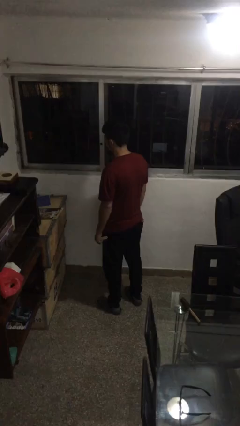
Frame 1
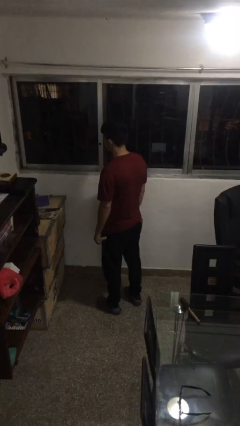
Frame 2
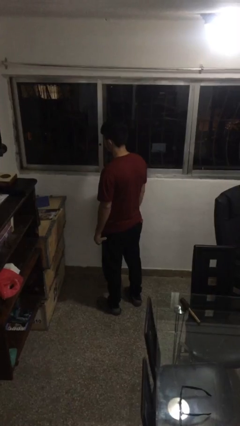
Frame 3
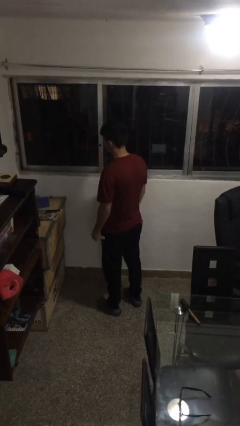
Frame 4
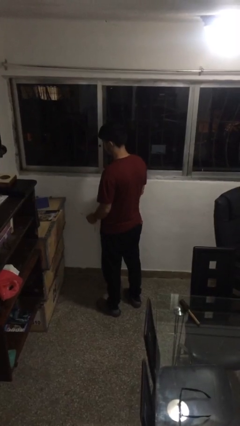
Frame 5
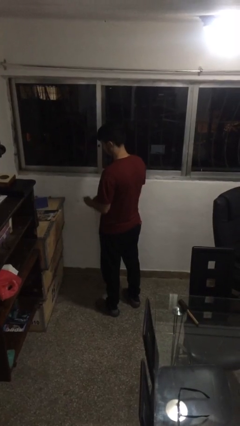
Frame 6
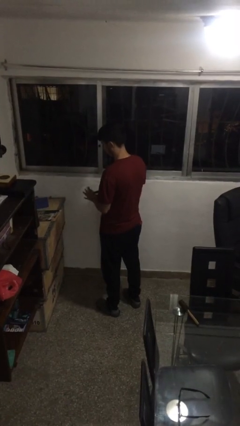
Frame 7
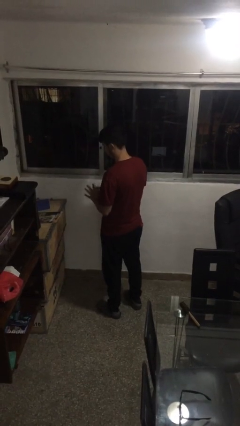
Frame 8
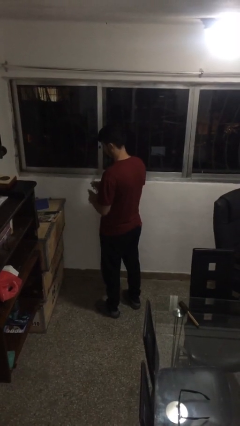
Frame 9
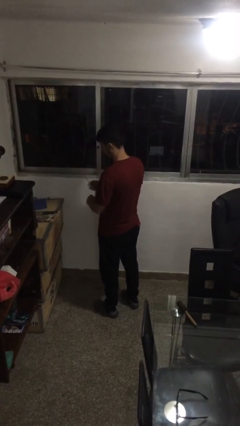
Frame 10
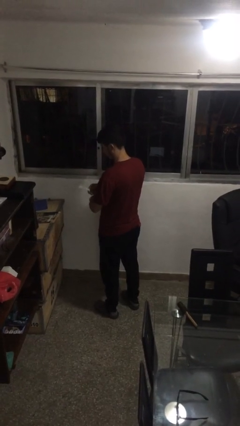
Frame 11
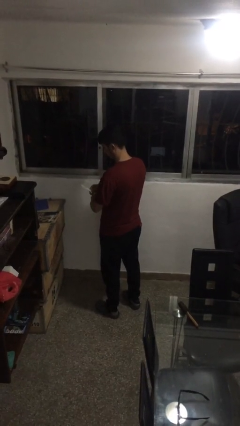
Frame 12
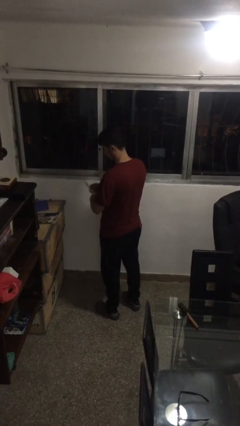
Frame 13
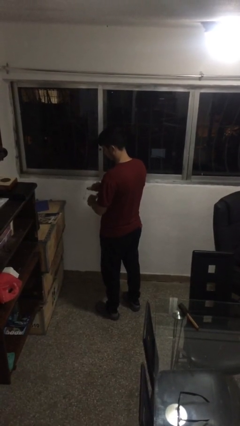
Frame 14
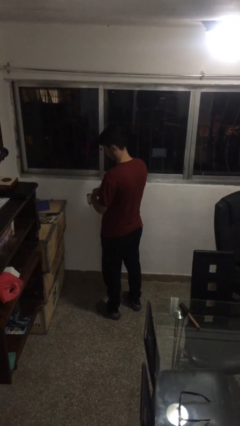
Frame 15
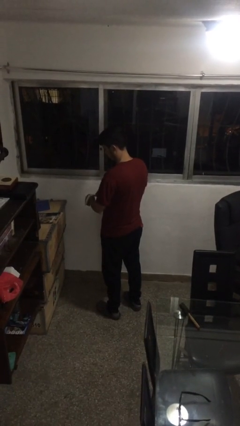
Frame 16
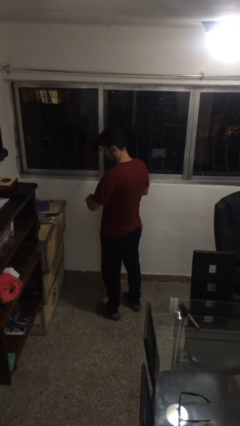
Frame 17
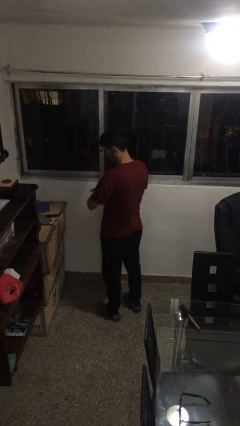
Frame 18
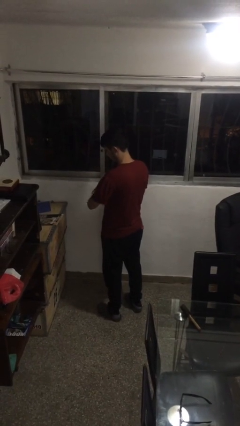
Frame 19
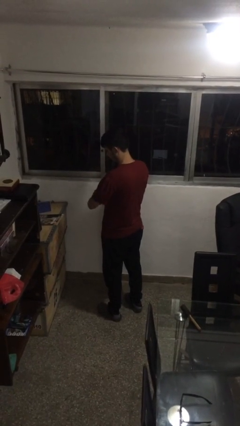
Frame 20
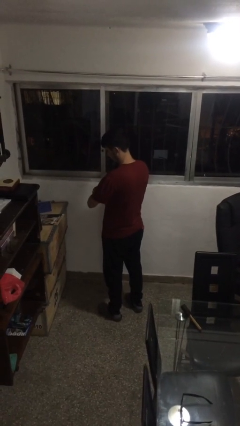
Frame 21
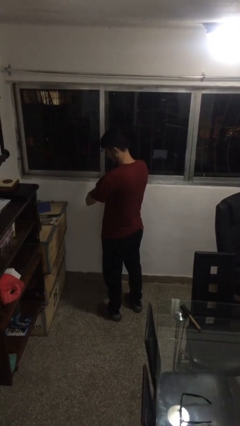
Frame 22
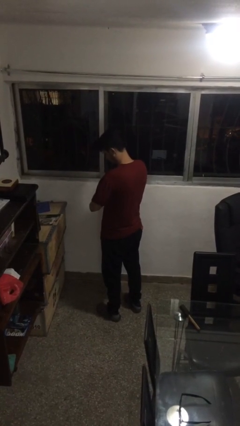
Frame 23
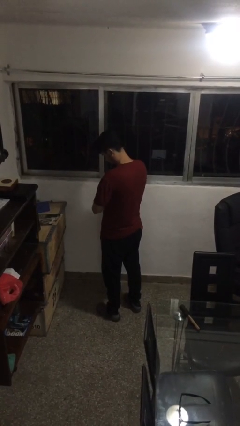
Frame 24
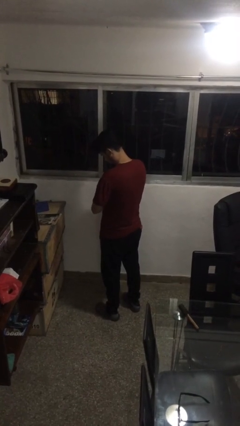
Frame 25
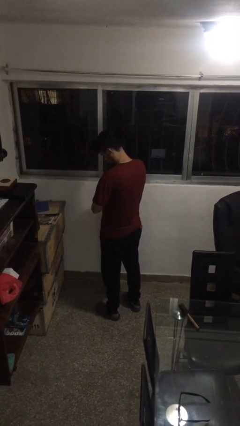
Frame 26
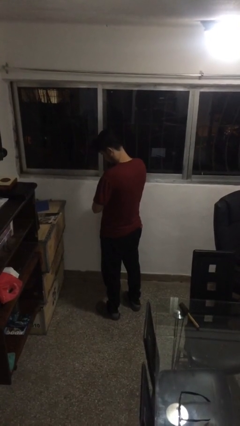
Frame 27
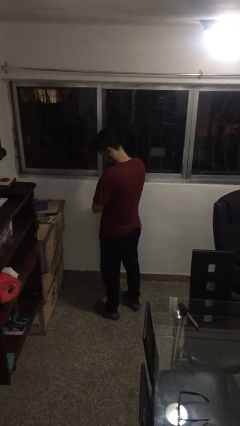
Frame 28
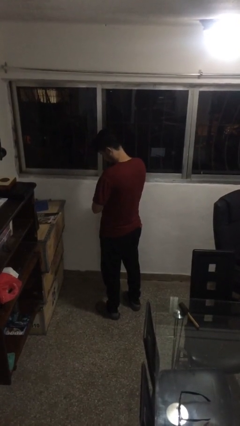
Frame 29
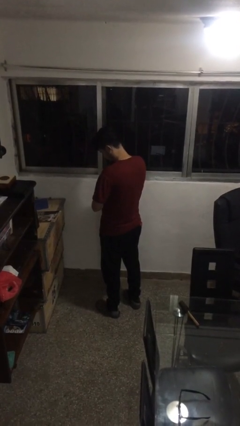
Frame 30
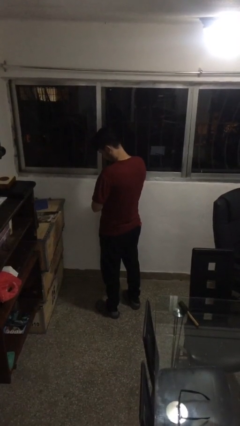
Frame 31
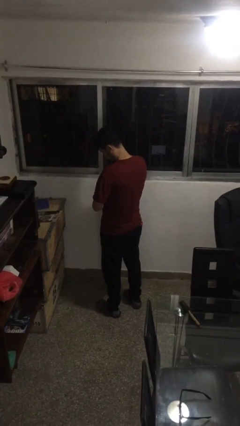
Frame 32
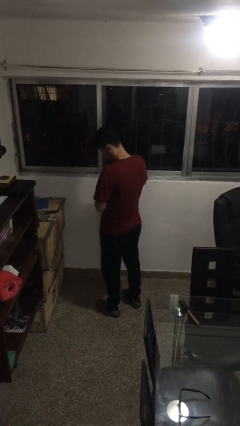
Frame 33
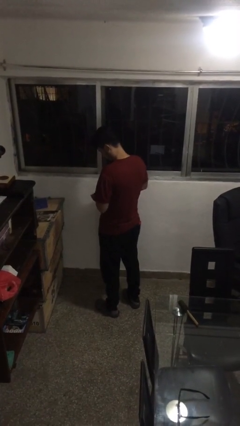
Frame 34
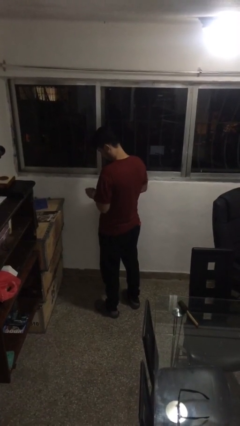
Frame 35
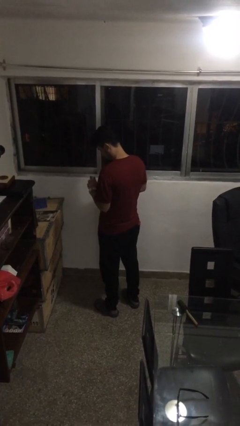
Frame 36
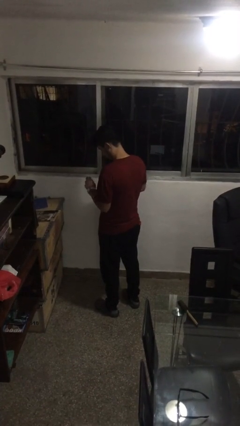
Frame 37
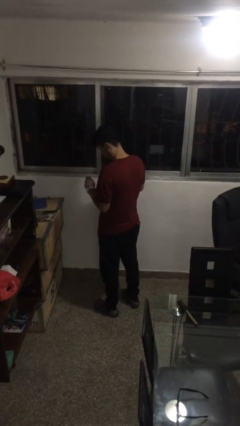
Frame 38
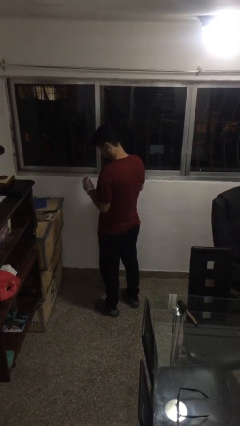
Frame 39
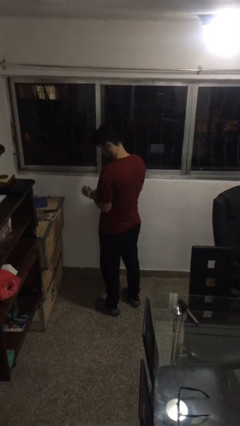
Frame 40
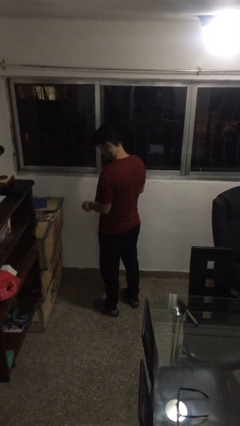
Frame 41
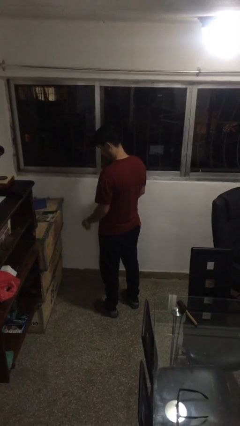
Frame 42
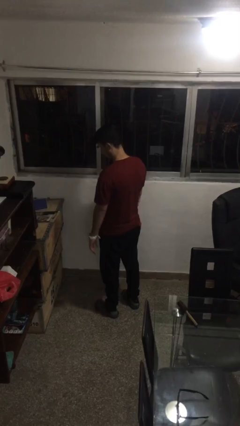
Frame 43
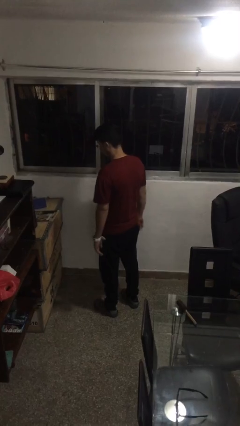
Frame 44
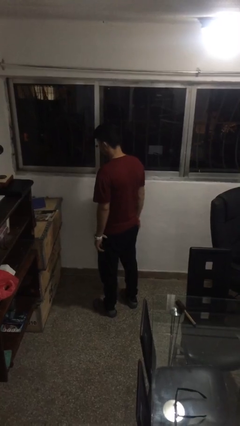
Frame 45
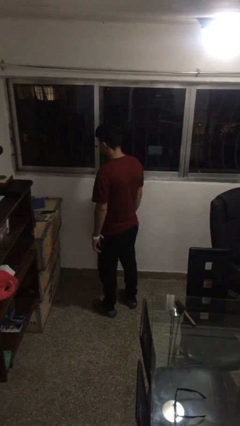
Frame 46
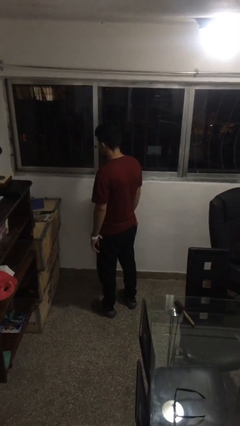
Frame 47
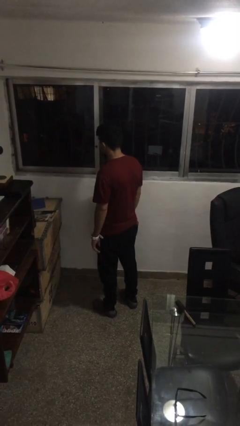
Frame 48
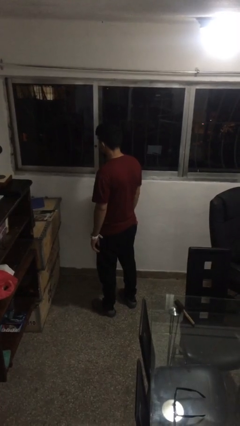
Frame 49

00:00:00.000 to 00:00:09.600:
person puts on wristwatch

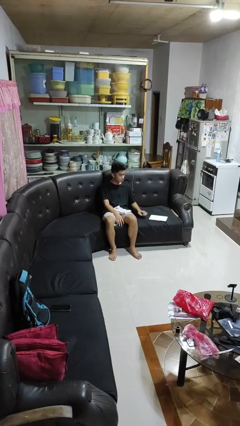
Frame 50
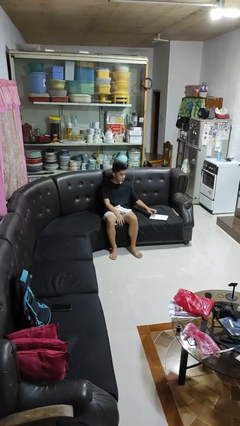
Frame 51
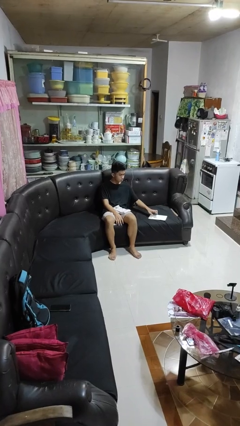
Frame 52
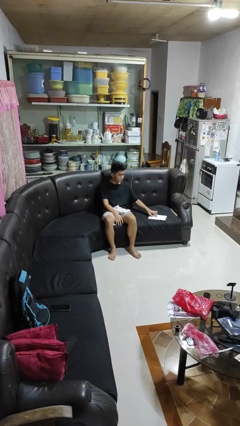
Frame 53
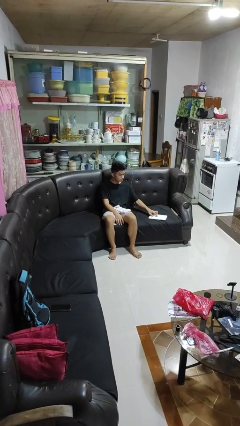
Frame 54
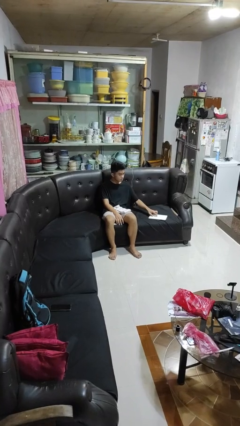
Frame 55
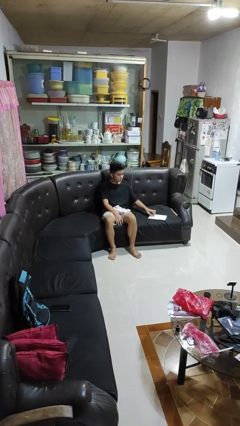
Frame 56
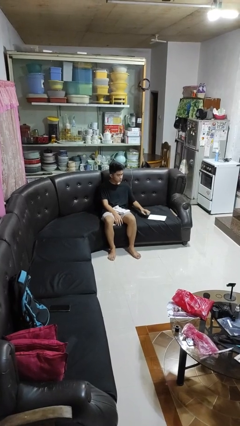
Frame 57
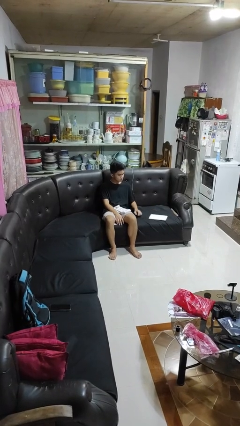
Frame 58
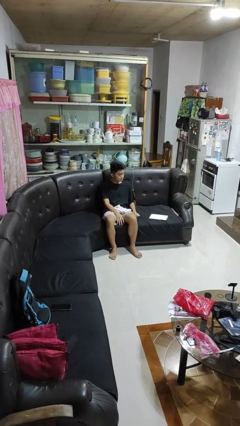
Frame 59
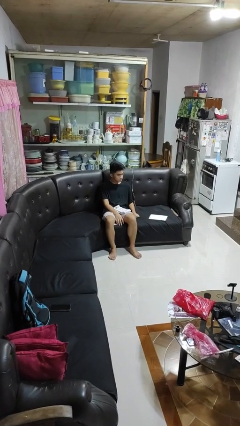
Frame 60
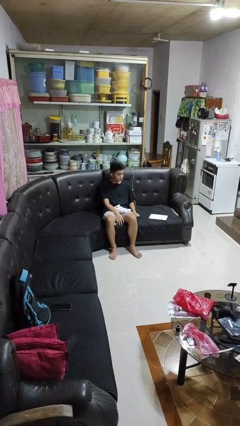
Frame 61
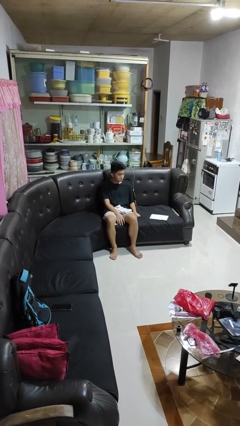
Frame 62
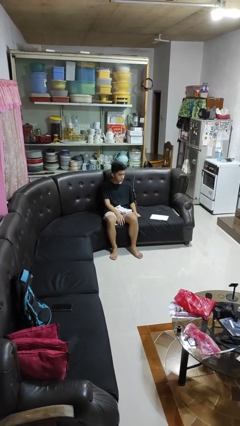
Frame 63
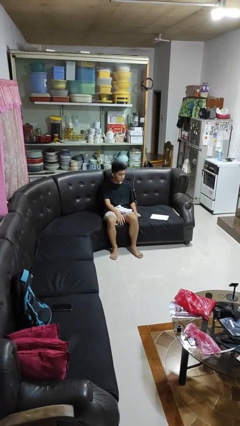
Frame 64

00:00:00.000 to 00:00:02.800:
person taps object with finger

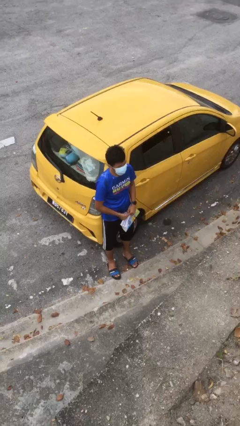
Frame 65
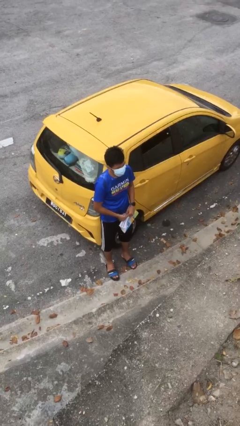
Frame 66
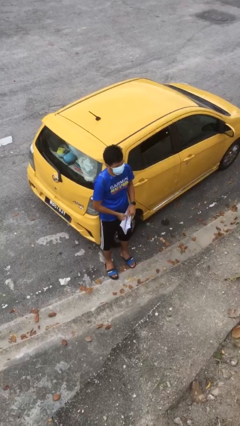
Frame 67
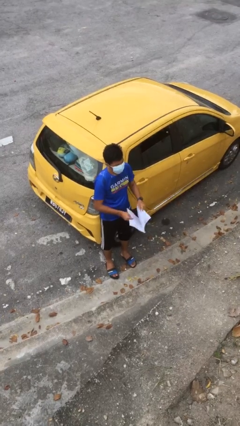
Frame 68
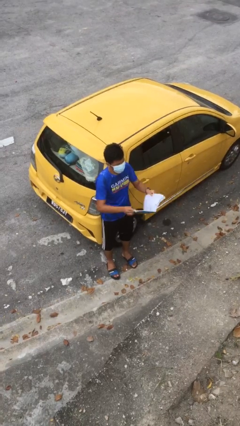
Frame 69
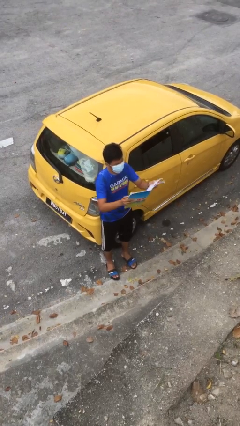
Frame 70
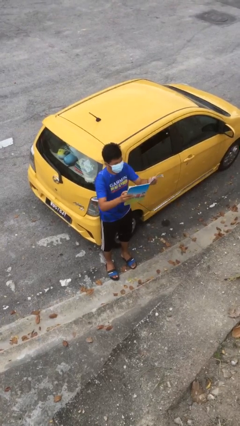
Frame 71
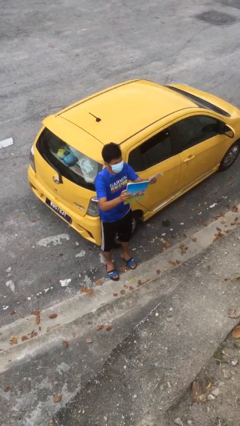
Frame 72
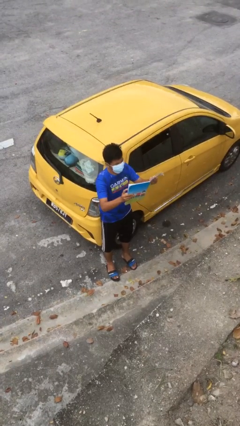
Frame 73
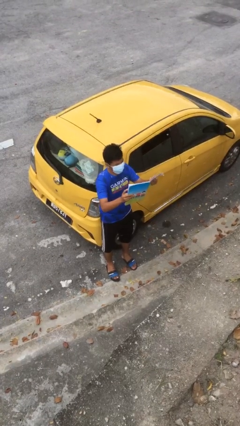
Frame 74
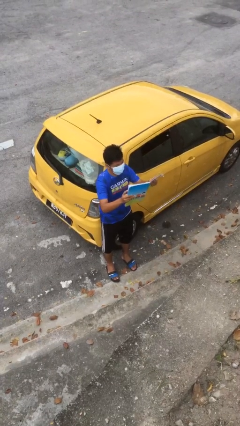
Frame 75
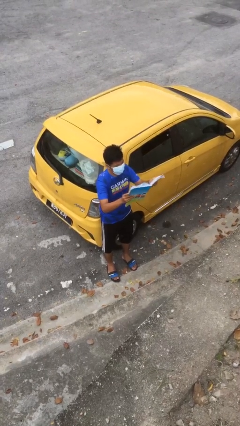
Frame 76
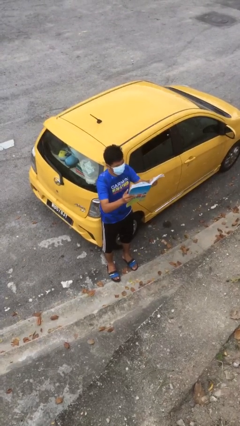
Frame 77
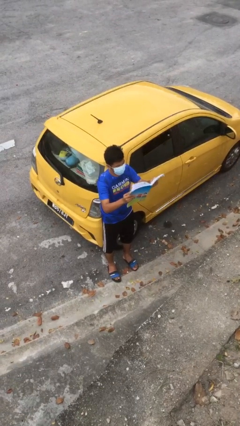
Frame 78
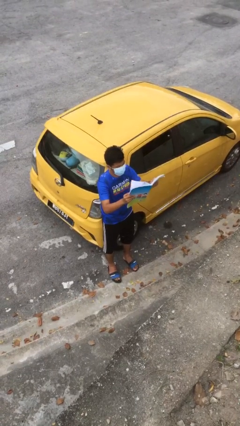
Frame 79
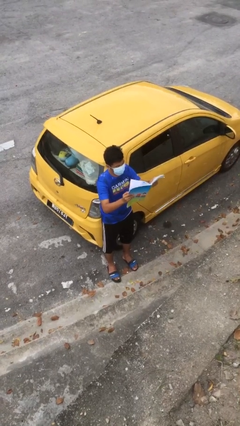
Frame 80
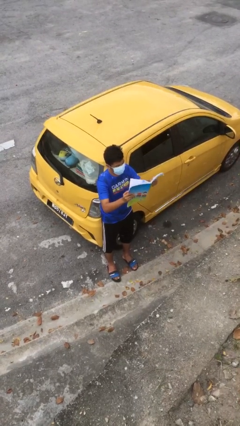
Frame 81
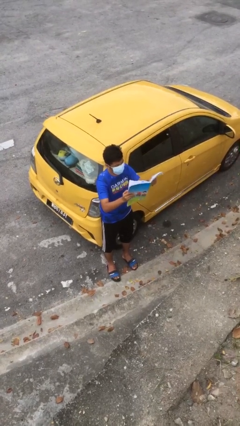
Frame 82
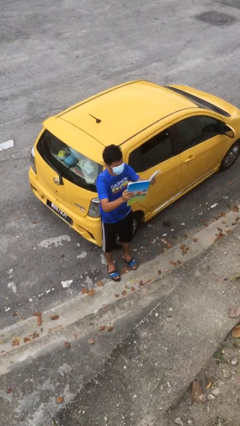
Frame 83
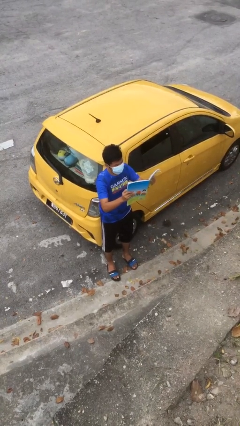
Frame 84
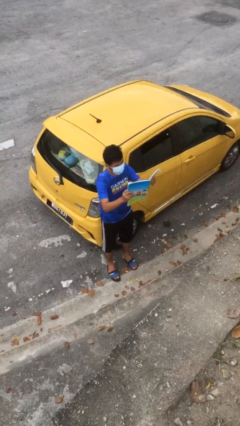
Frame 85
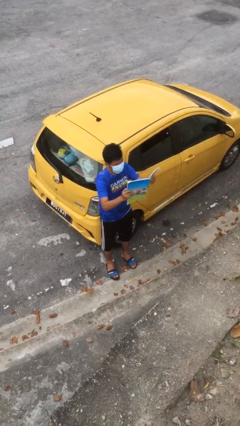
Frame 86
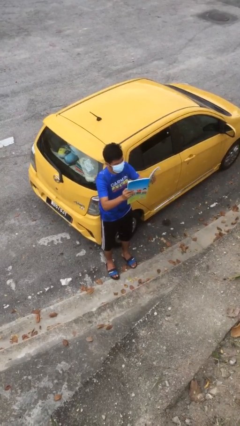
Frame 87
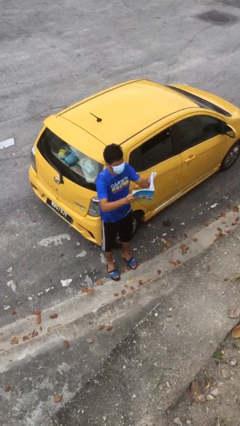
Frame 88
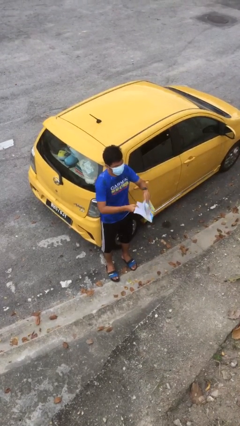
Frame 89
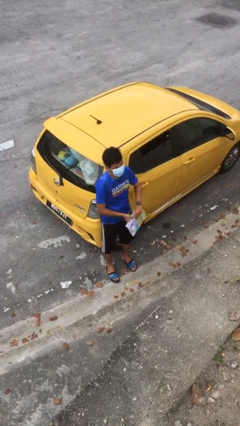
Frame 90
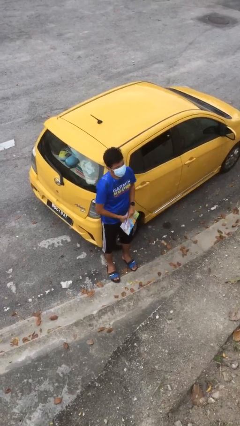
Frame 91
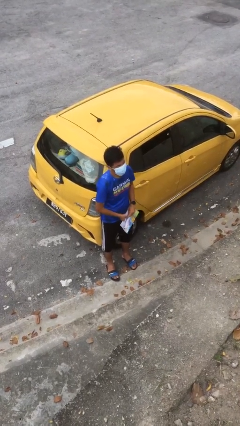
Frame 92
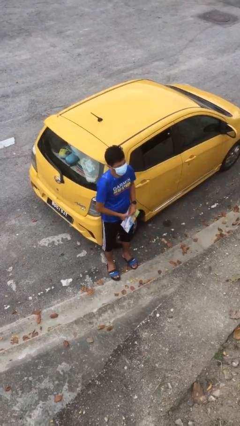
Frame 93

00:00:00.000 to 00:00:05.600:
person reads document
